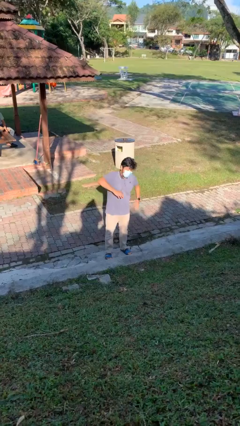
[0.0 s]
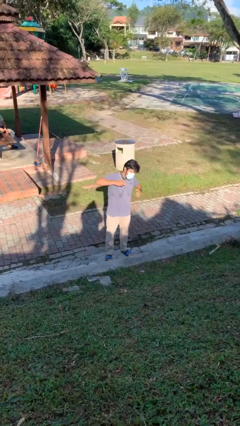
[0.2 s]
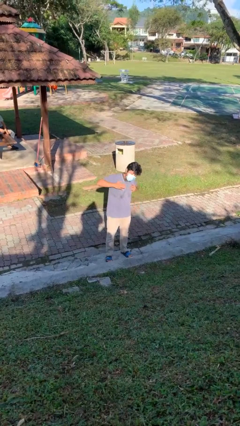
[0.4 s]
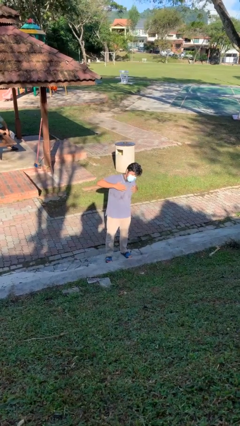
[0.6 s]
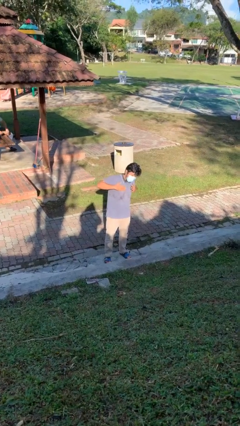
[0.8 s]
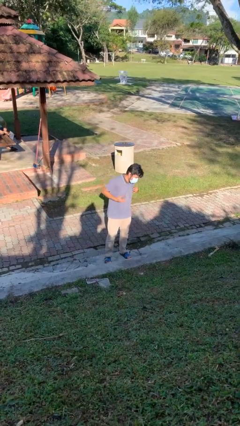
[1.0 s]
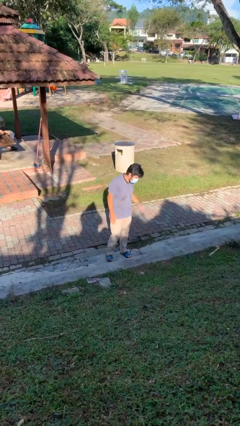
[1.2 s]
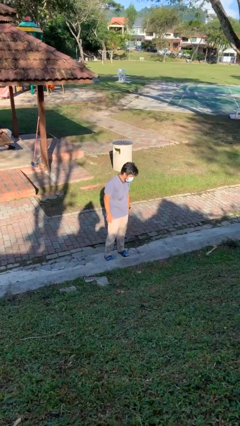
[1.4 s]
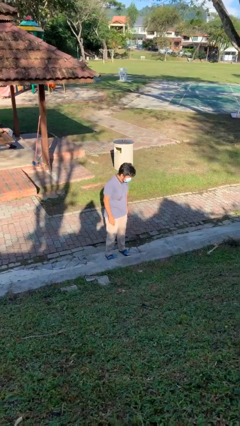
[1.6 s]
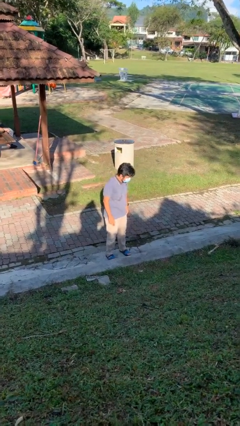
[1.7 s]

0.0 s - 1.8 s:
person drums on chest

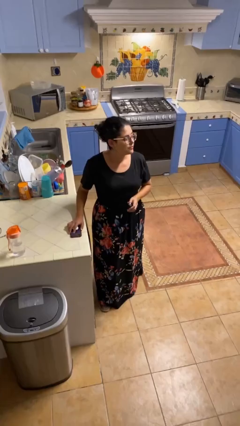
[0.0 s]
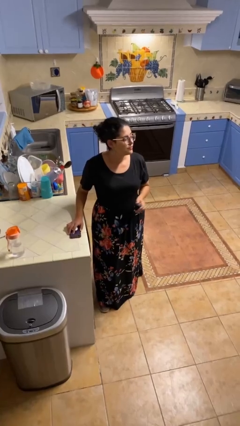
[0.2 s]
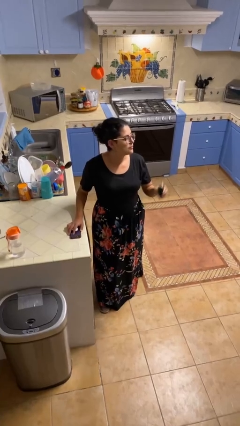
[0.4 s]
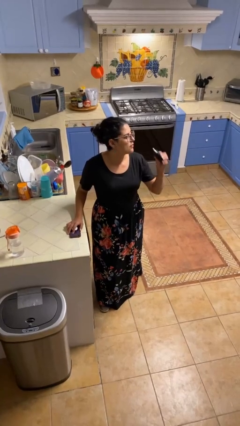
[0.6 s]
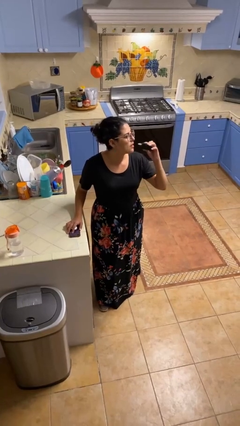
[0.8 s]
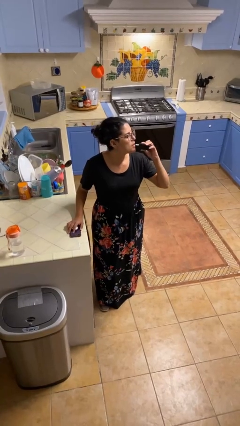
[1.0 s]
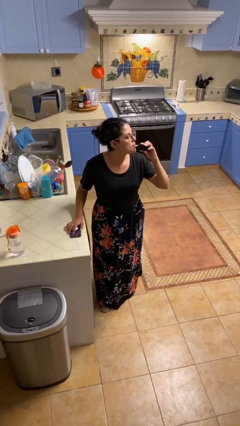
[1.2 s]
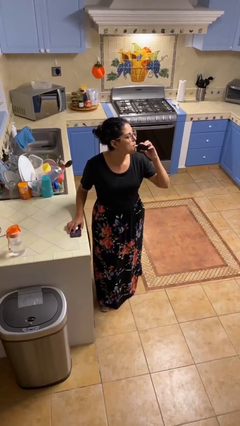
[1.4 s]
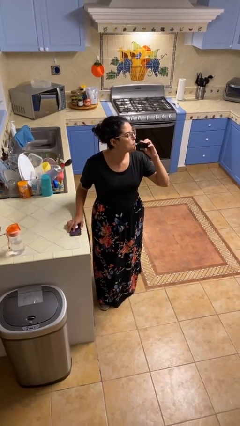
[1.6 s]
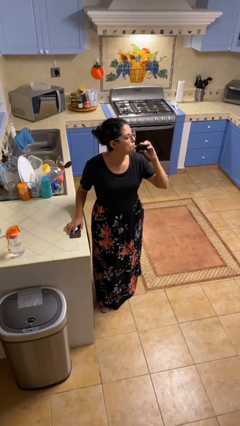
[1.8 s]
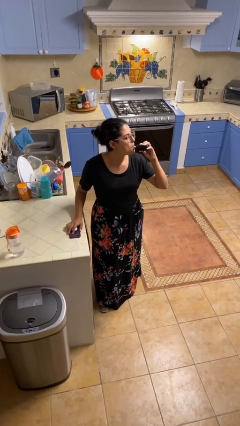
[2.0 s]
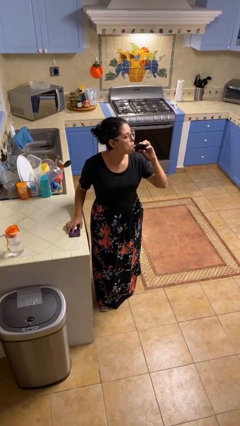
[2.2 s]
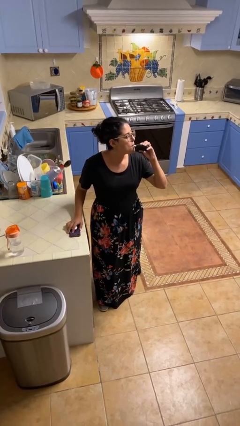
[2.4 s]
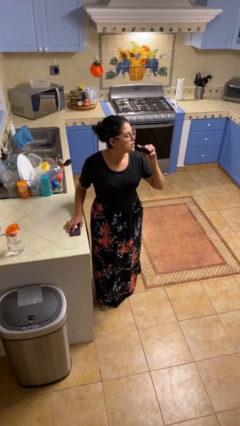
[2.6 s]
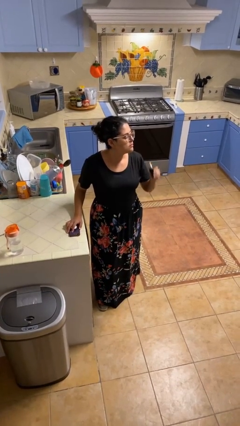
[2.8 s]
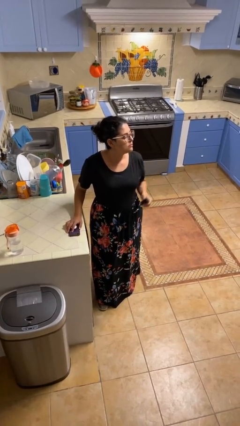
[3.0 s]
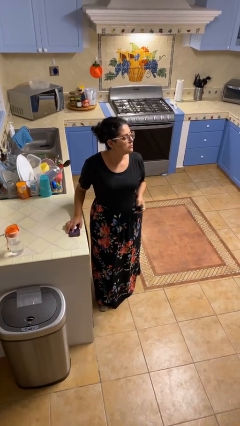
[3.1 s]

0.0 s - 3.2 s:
person vapes

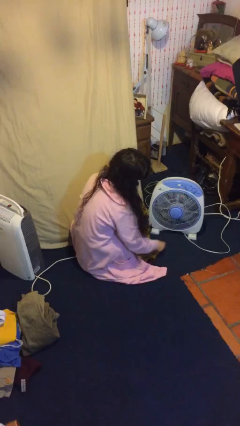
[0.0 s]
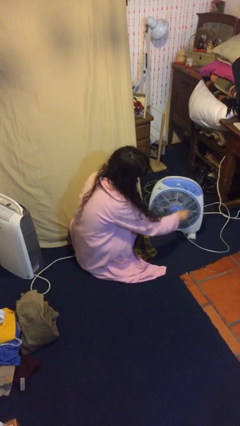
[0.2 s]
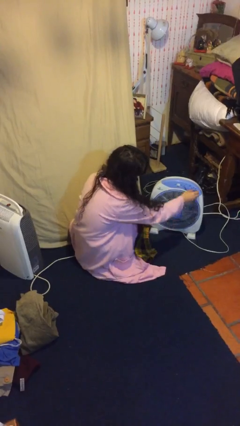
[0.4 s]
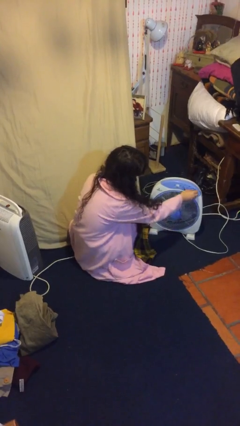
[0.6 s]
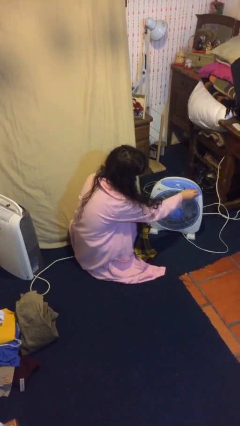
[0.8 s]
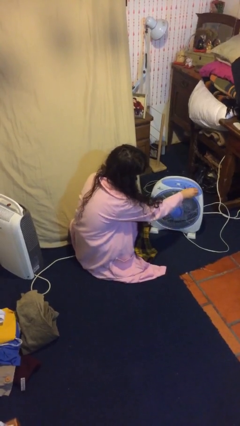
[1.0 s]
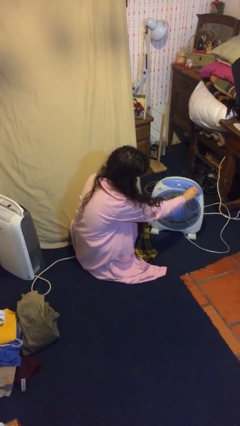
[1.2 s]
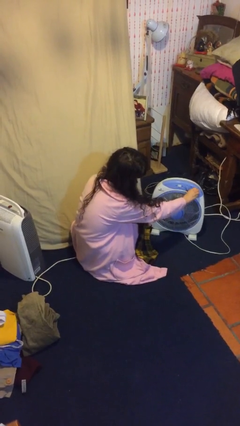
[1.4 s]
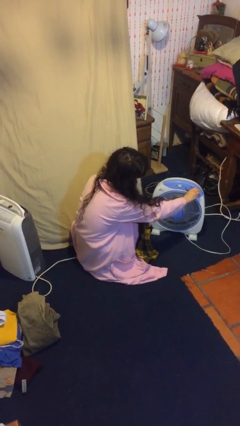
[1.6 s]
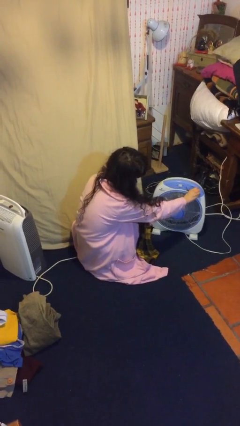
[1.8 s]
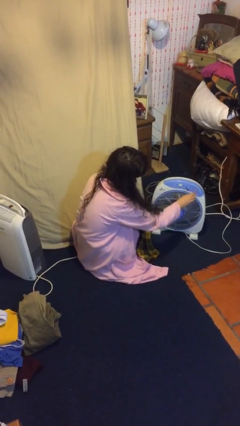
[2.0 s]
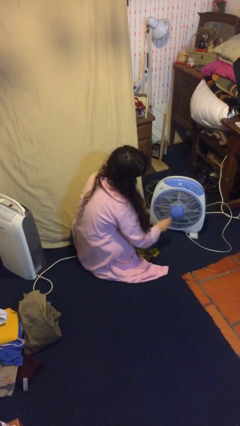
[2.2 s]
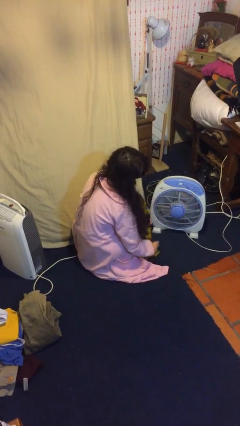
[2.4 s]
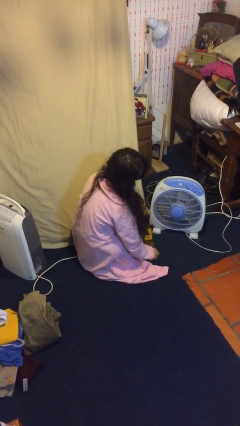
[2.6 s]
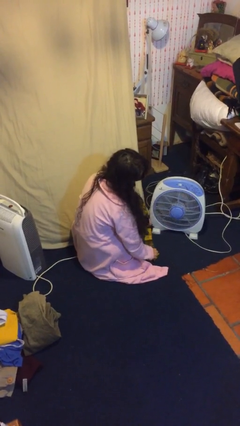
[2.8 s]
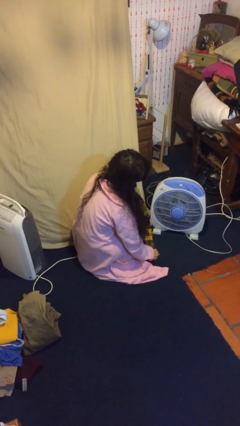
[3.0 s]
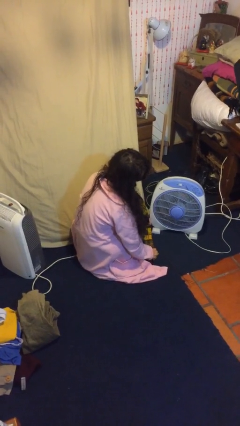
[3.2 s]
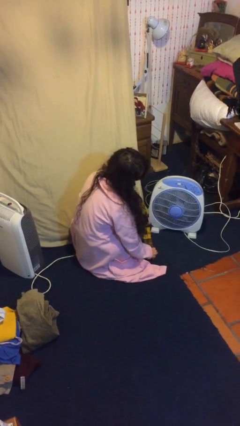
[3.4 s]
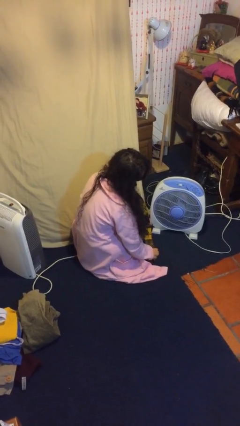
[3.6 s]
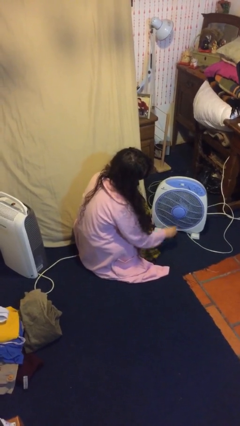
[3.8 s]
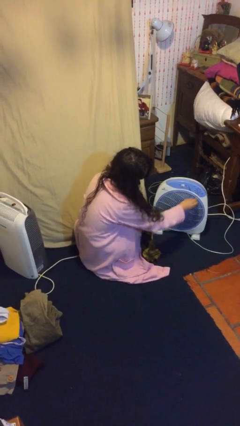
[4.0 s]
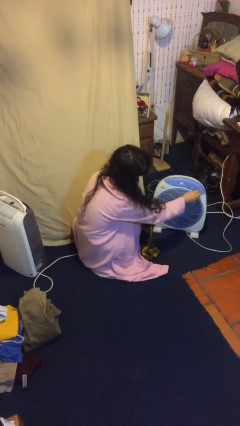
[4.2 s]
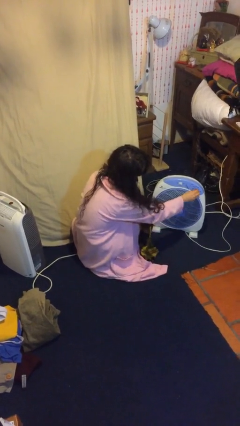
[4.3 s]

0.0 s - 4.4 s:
person turns on fan

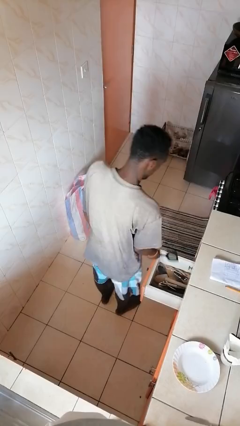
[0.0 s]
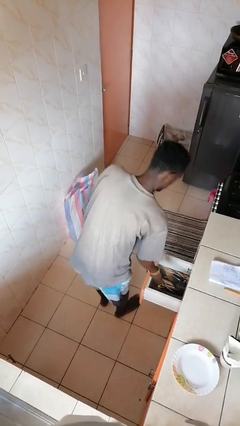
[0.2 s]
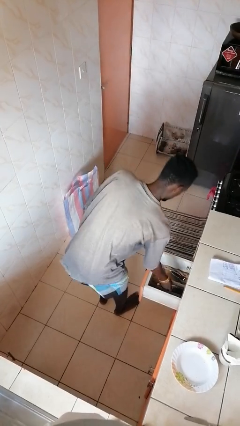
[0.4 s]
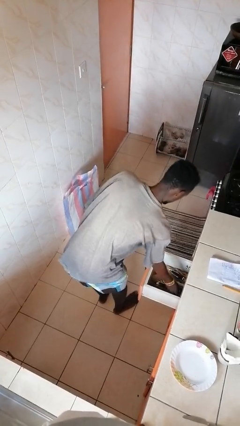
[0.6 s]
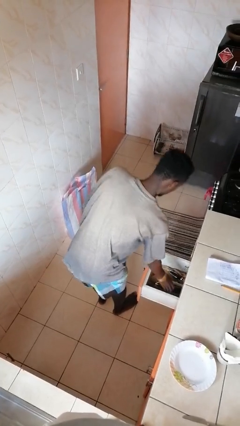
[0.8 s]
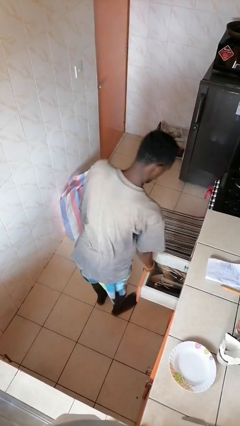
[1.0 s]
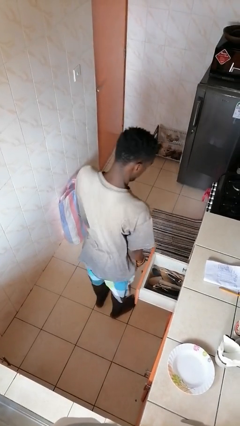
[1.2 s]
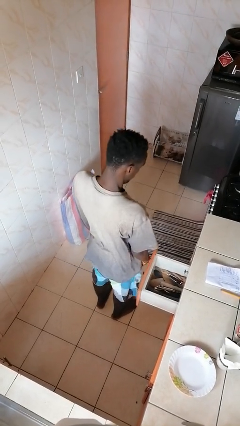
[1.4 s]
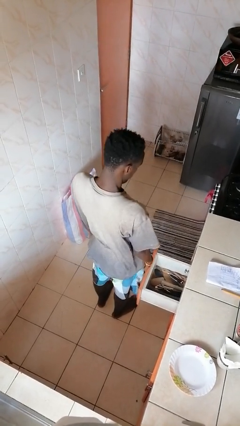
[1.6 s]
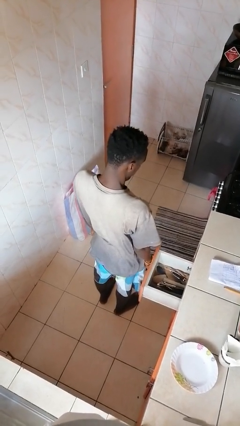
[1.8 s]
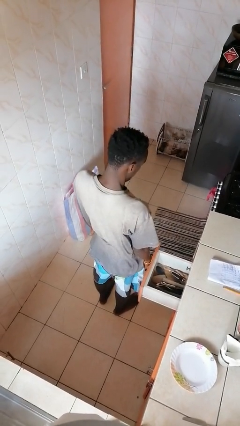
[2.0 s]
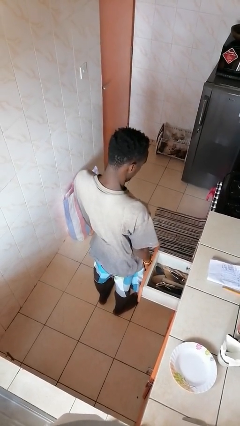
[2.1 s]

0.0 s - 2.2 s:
person puts object into kitchen drawer

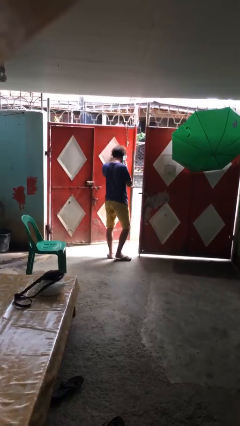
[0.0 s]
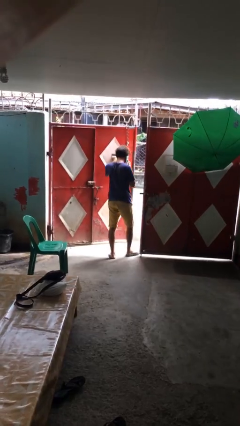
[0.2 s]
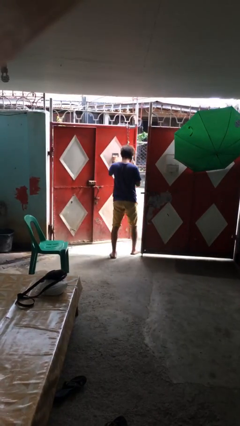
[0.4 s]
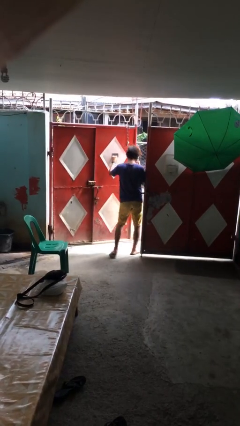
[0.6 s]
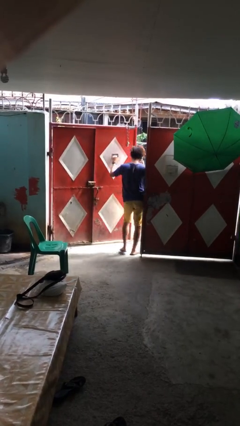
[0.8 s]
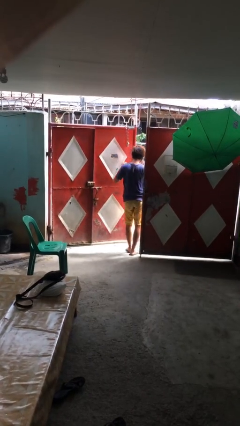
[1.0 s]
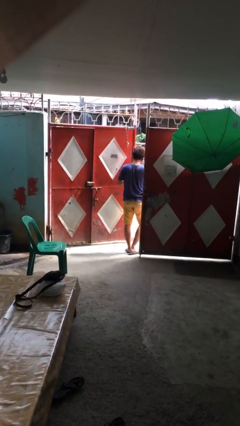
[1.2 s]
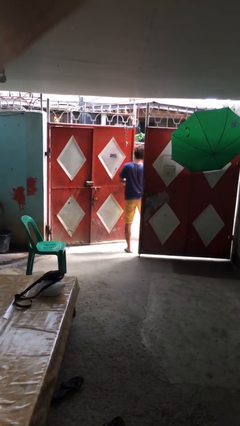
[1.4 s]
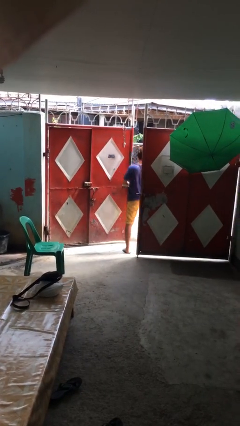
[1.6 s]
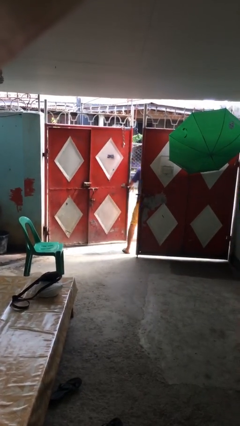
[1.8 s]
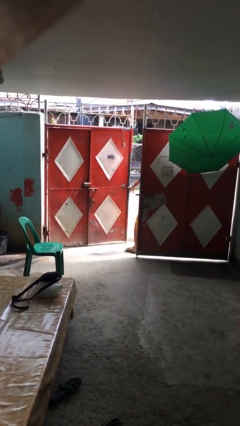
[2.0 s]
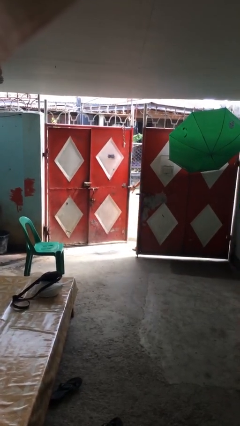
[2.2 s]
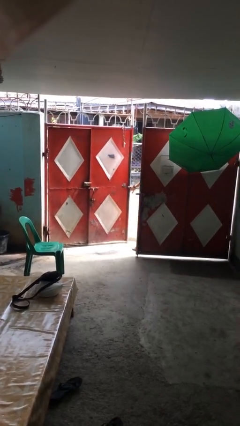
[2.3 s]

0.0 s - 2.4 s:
person exits scene through structure

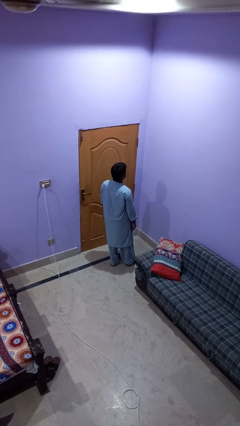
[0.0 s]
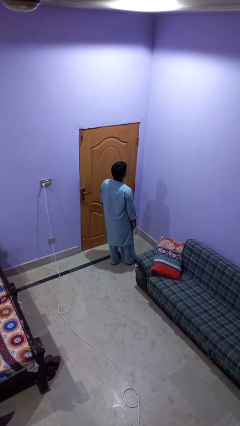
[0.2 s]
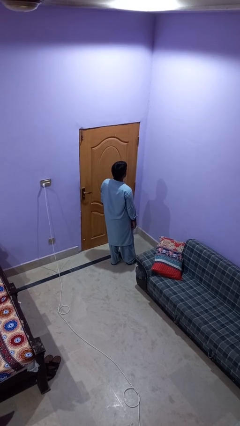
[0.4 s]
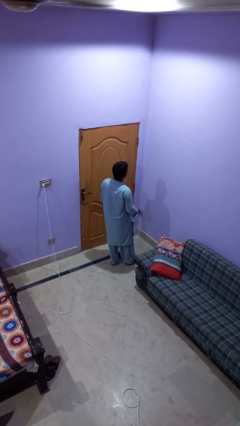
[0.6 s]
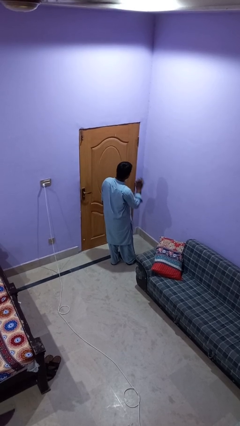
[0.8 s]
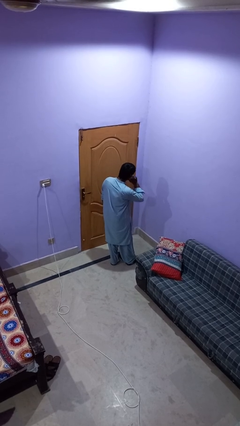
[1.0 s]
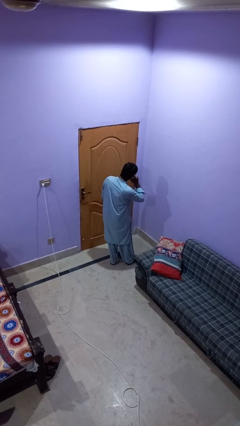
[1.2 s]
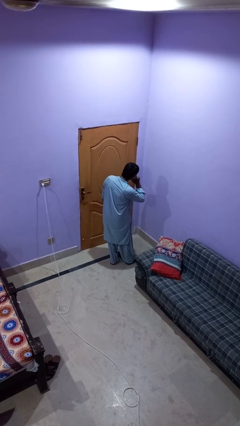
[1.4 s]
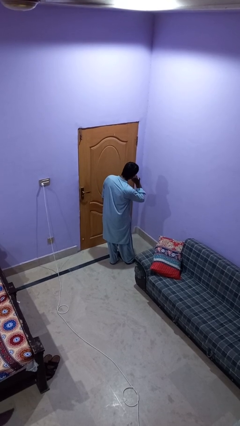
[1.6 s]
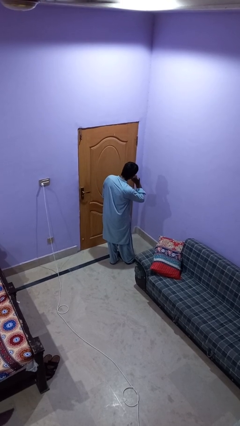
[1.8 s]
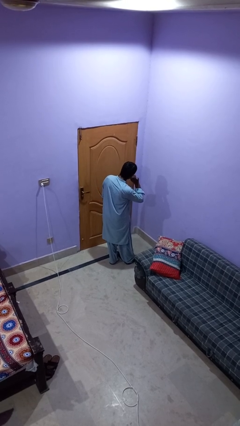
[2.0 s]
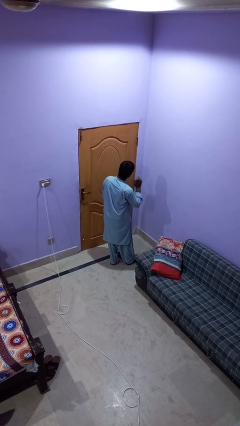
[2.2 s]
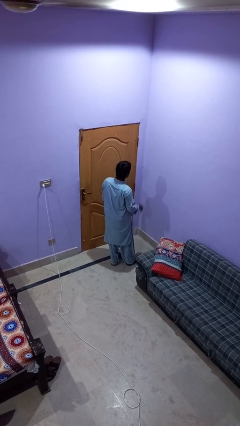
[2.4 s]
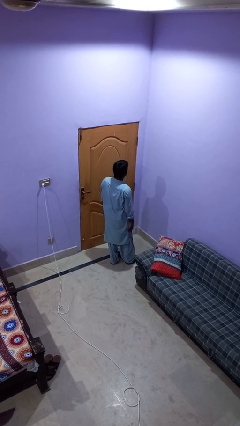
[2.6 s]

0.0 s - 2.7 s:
person gestures listen closely

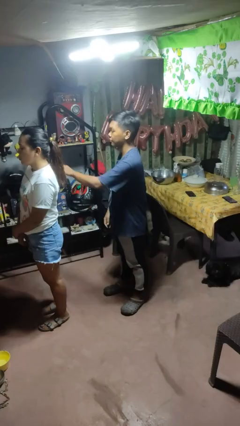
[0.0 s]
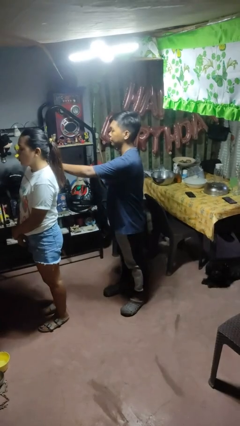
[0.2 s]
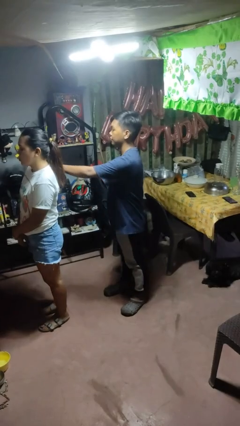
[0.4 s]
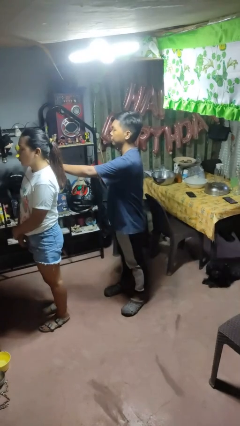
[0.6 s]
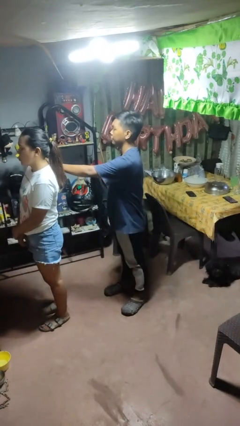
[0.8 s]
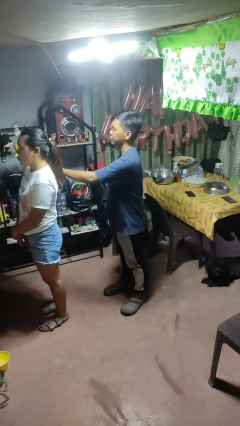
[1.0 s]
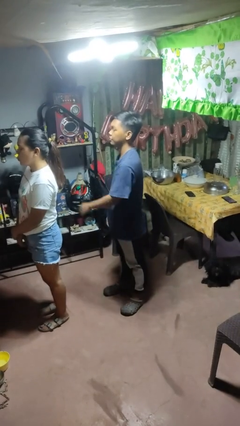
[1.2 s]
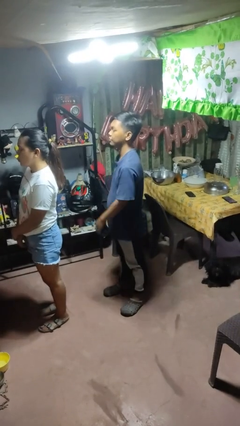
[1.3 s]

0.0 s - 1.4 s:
person pounds shoulders of person
